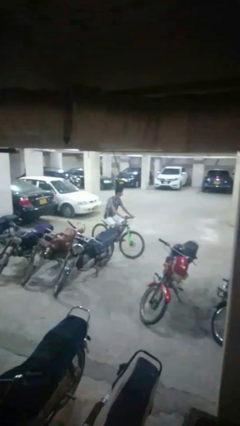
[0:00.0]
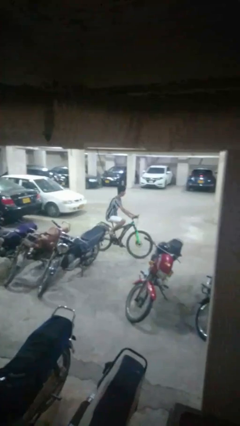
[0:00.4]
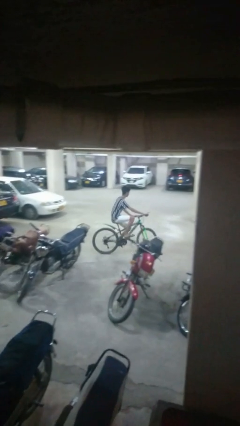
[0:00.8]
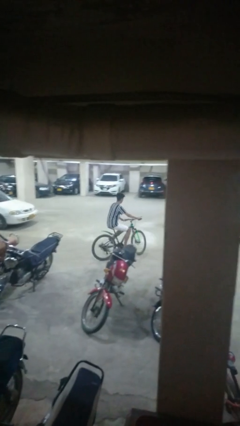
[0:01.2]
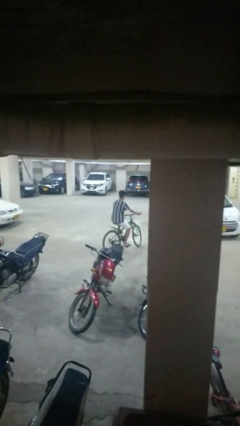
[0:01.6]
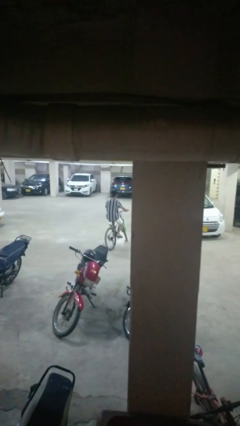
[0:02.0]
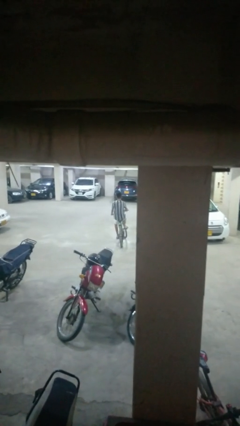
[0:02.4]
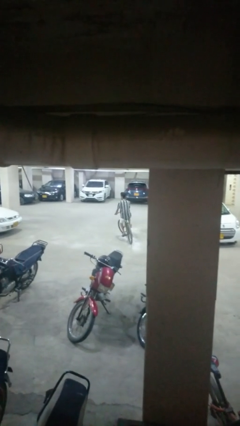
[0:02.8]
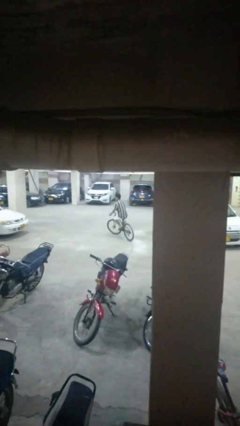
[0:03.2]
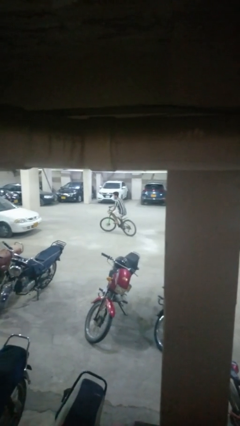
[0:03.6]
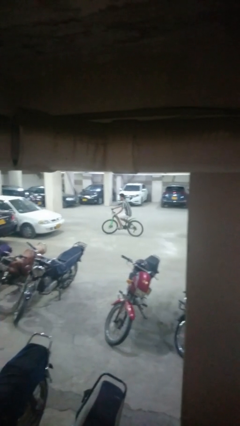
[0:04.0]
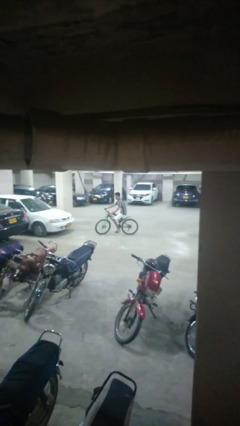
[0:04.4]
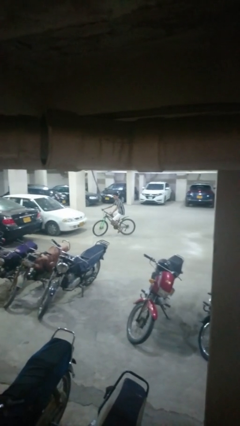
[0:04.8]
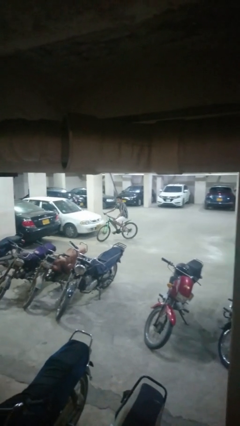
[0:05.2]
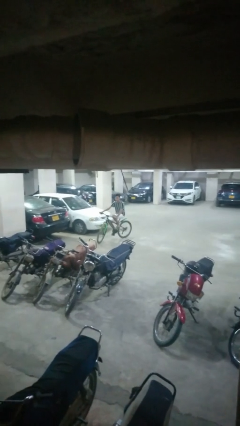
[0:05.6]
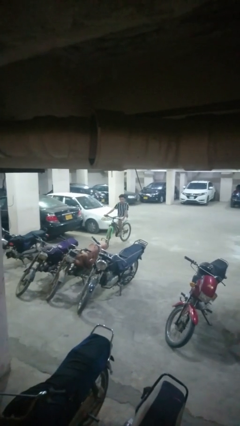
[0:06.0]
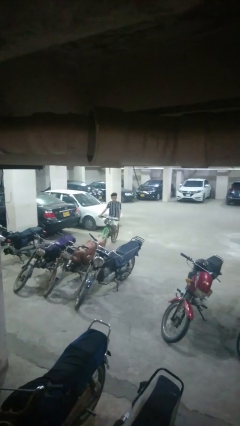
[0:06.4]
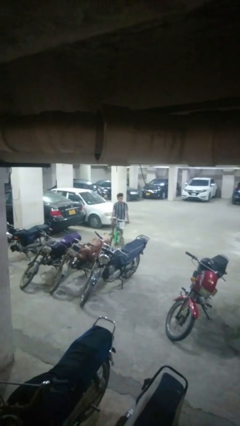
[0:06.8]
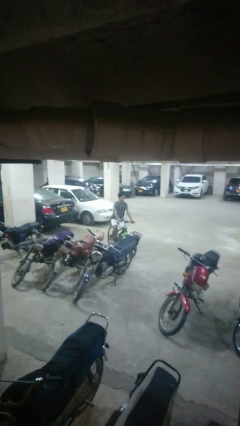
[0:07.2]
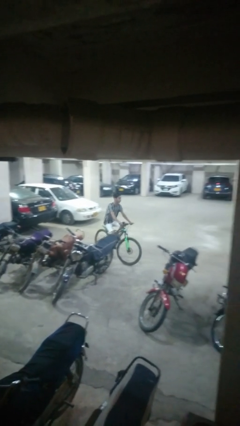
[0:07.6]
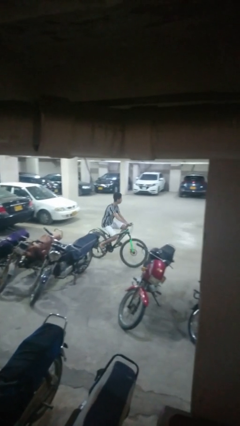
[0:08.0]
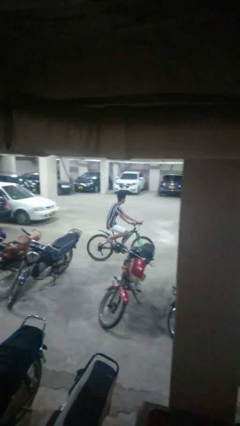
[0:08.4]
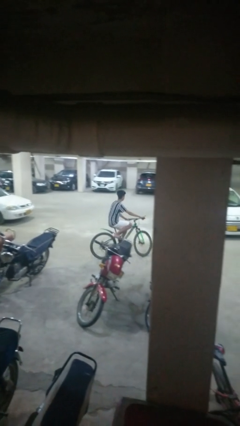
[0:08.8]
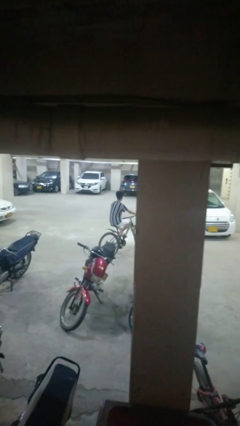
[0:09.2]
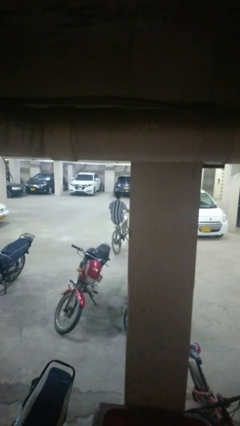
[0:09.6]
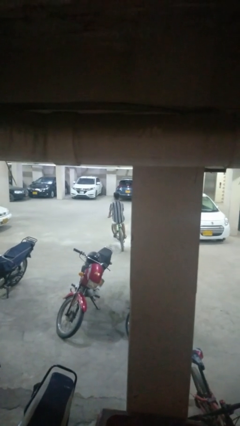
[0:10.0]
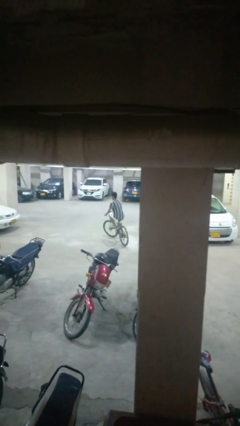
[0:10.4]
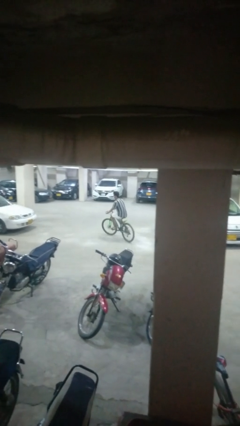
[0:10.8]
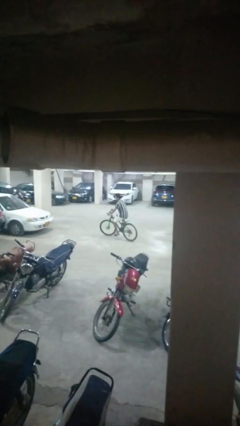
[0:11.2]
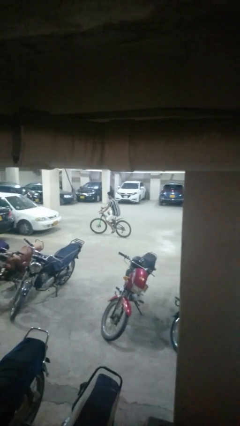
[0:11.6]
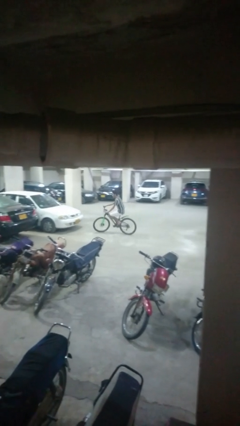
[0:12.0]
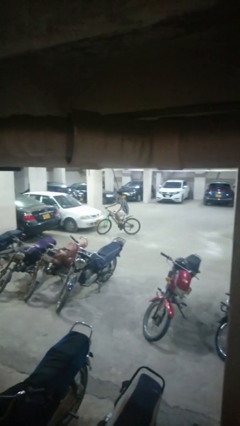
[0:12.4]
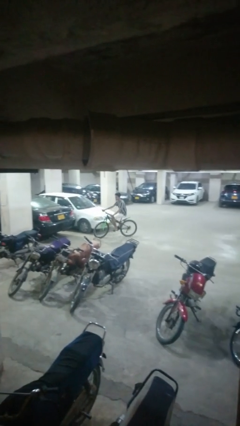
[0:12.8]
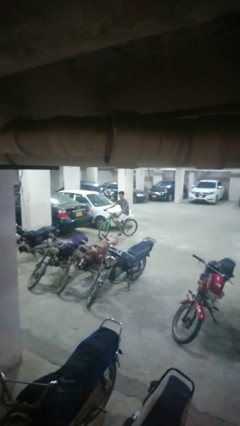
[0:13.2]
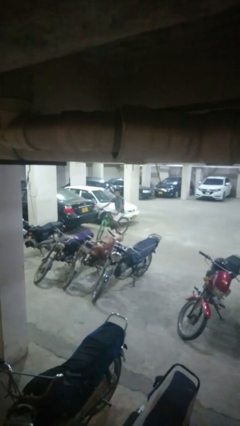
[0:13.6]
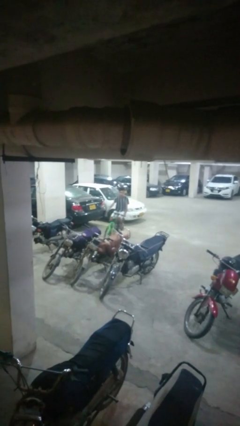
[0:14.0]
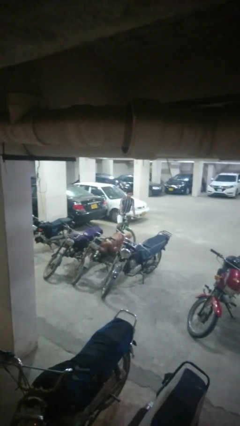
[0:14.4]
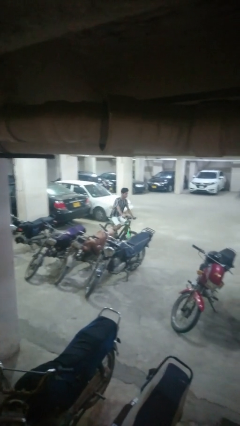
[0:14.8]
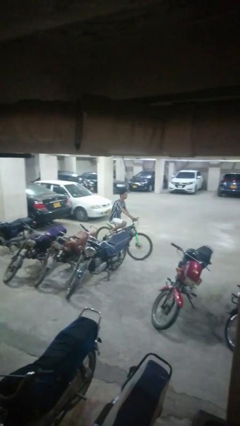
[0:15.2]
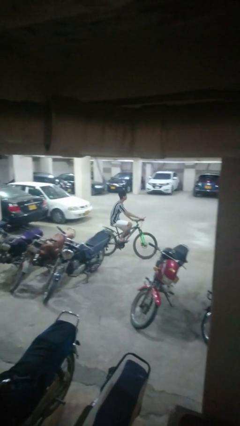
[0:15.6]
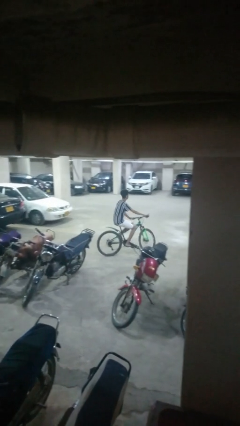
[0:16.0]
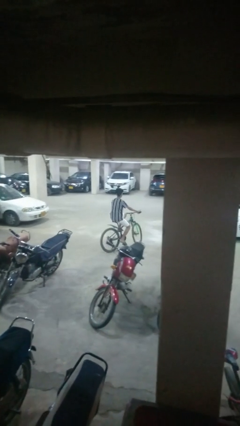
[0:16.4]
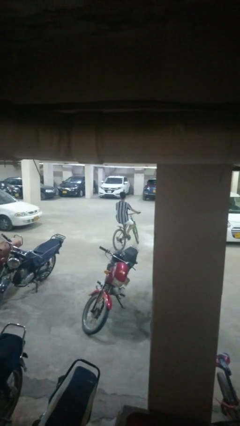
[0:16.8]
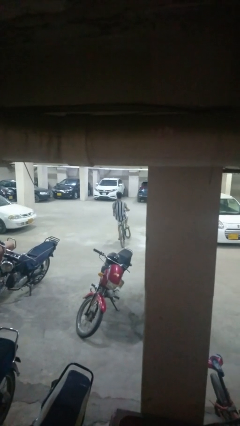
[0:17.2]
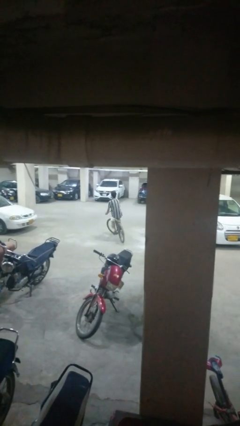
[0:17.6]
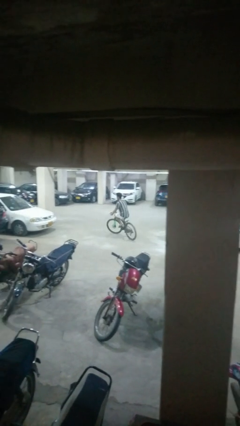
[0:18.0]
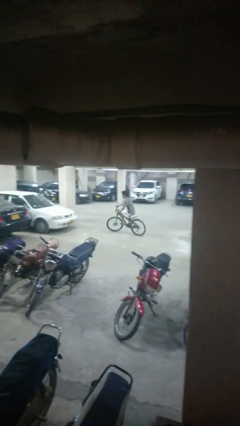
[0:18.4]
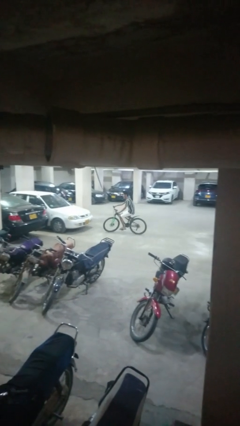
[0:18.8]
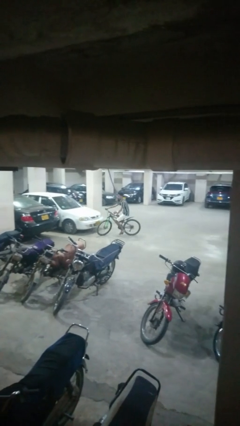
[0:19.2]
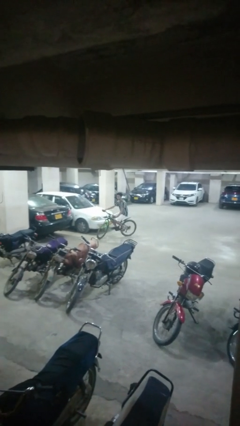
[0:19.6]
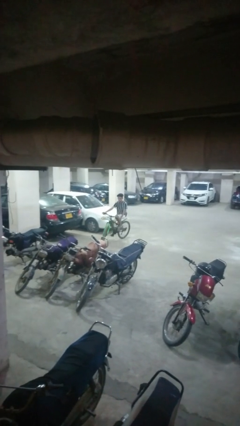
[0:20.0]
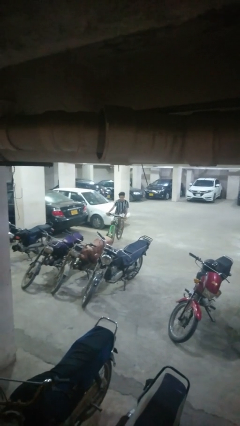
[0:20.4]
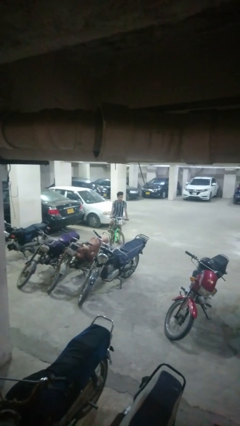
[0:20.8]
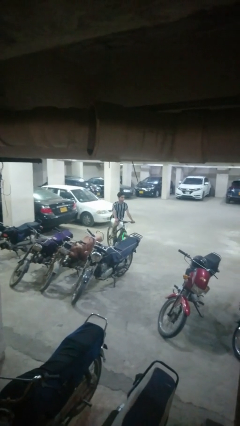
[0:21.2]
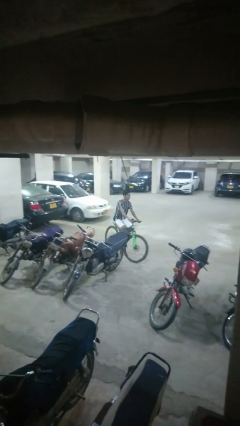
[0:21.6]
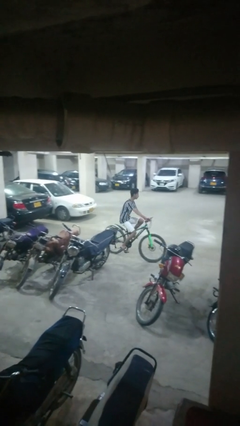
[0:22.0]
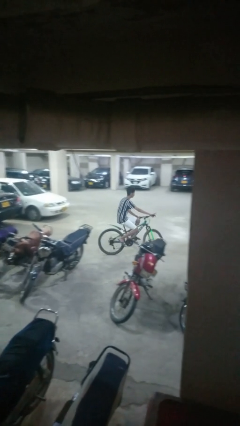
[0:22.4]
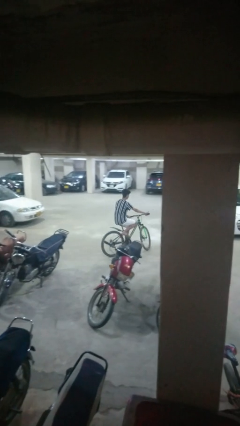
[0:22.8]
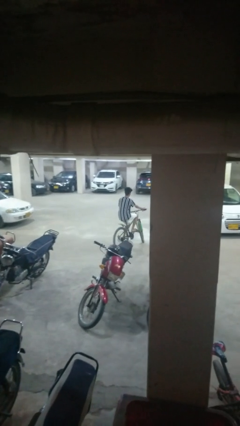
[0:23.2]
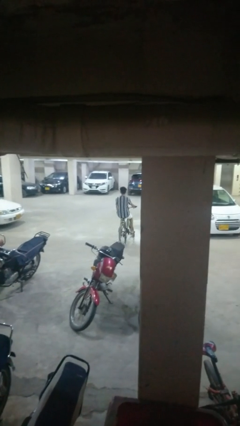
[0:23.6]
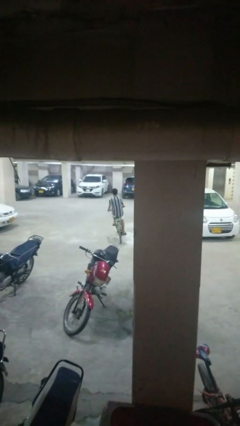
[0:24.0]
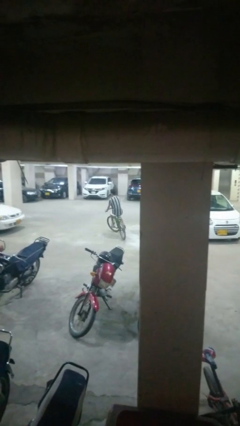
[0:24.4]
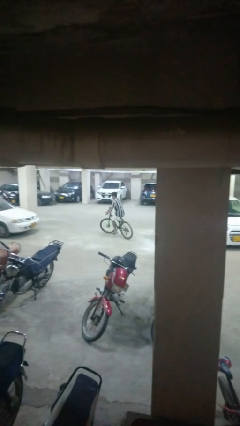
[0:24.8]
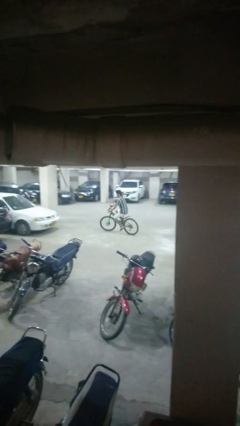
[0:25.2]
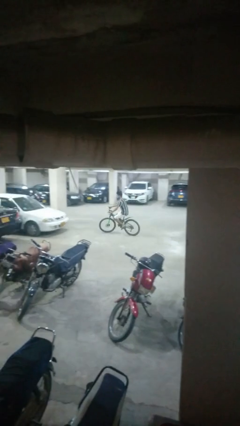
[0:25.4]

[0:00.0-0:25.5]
person rides bicycle

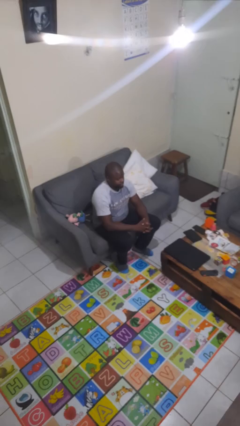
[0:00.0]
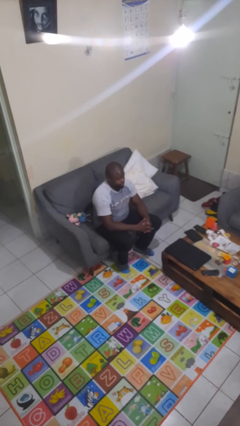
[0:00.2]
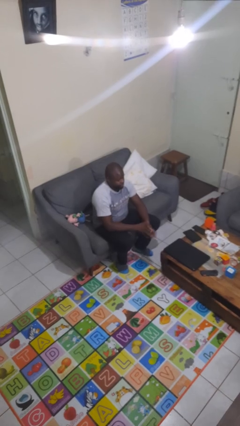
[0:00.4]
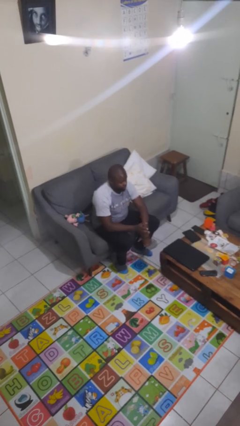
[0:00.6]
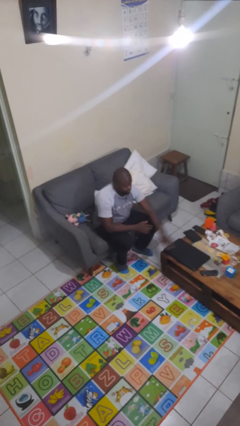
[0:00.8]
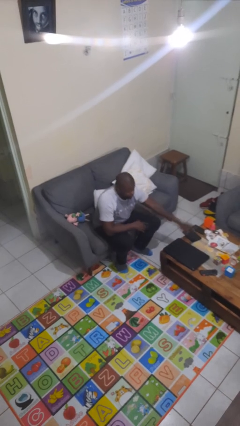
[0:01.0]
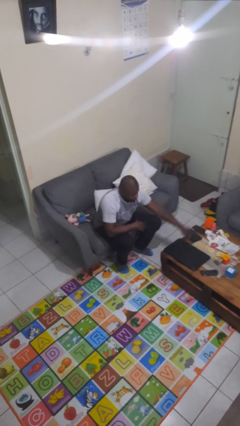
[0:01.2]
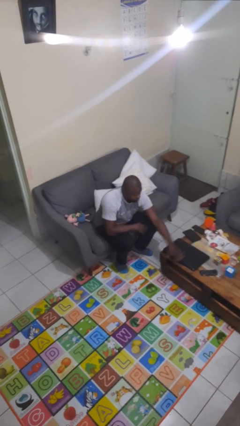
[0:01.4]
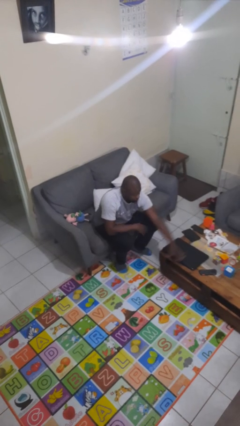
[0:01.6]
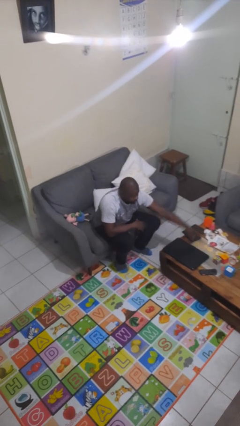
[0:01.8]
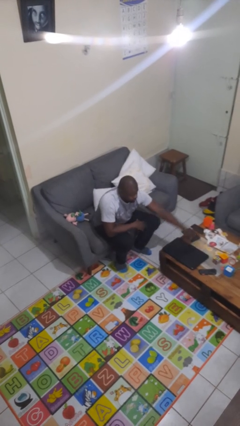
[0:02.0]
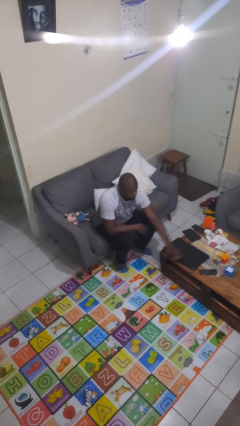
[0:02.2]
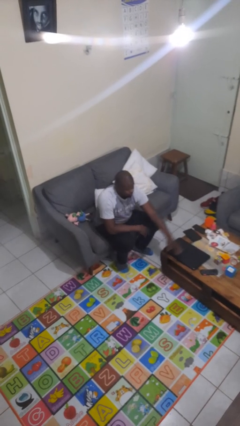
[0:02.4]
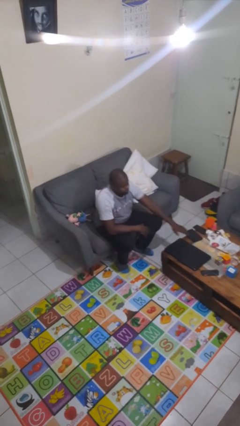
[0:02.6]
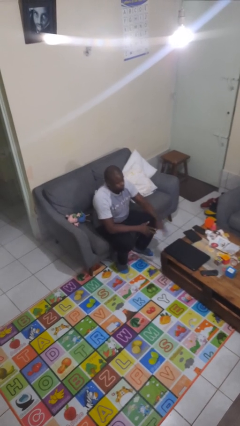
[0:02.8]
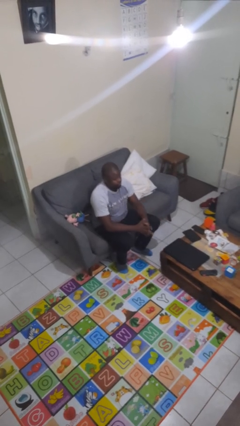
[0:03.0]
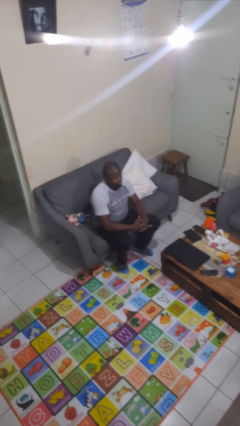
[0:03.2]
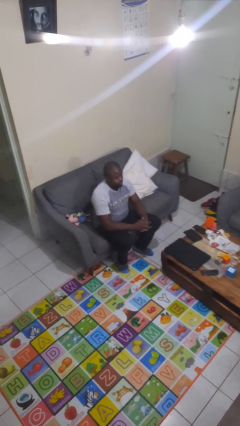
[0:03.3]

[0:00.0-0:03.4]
person waves hand over object

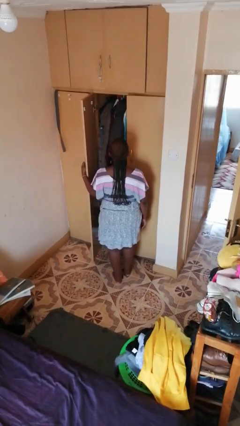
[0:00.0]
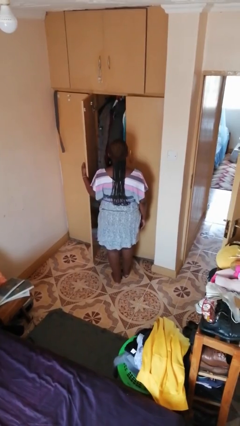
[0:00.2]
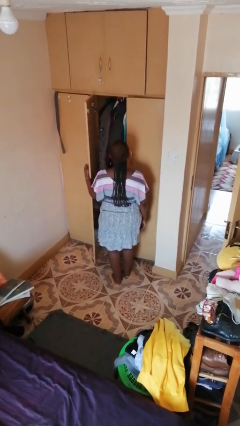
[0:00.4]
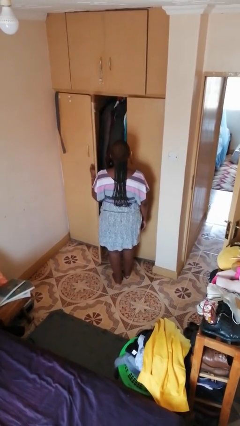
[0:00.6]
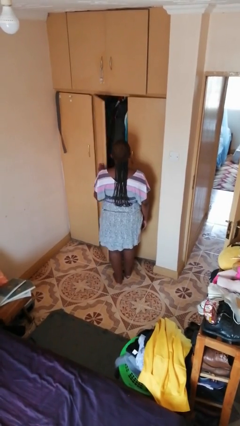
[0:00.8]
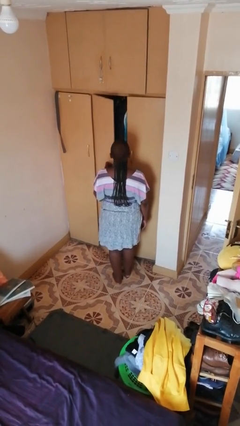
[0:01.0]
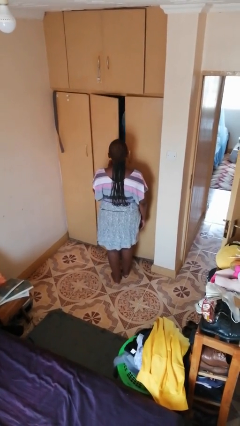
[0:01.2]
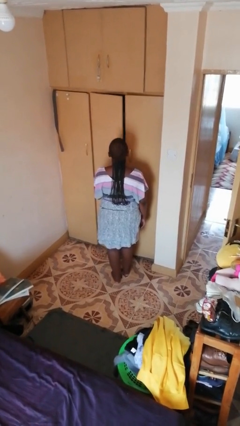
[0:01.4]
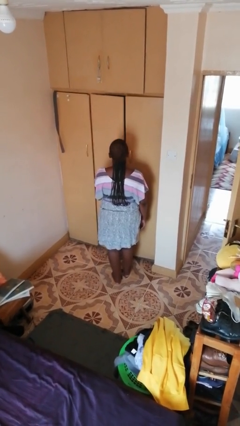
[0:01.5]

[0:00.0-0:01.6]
person closes closet door
